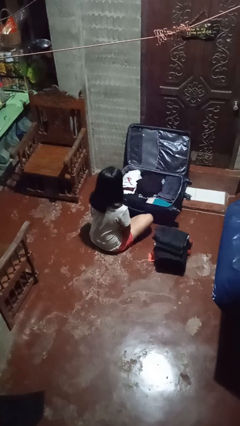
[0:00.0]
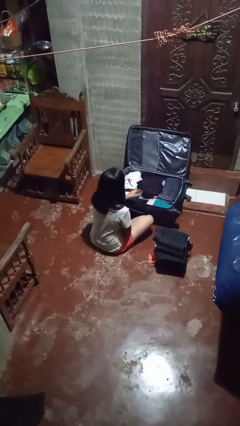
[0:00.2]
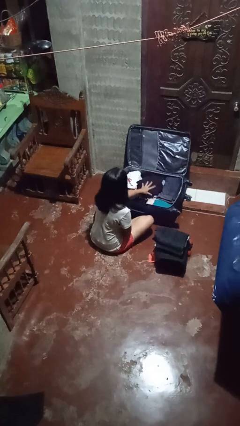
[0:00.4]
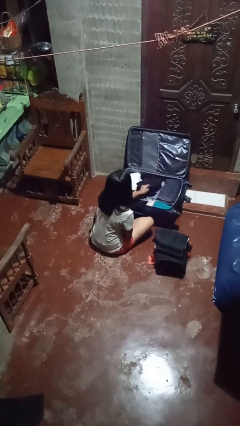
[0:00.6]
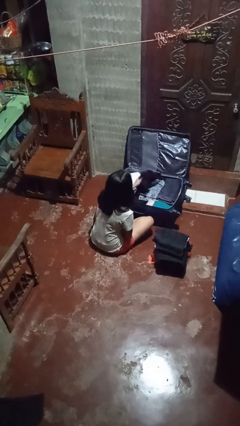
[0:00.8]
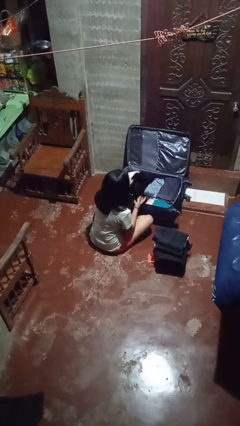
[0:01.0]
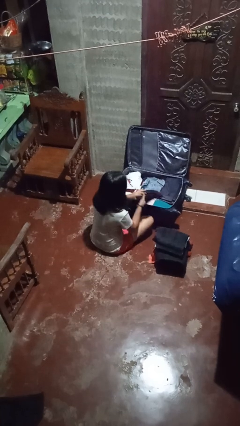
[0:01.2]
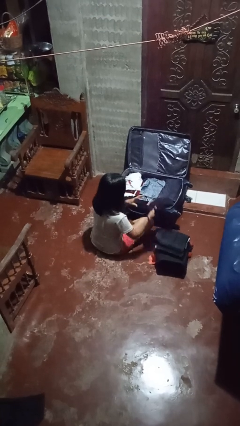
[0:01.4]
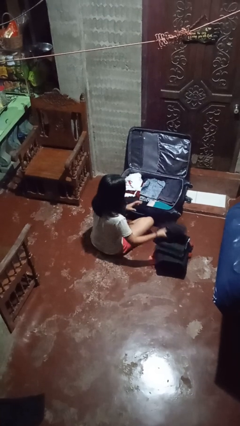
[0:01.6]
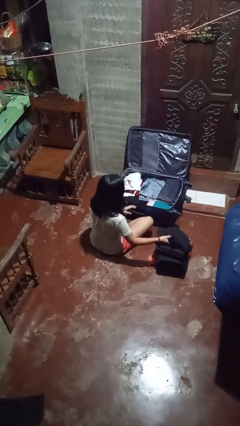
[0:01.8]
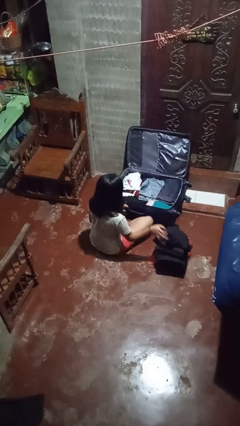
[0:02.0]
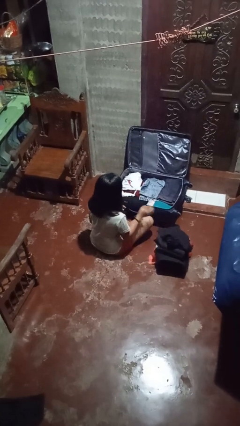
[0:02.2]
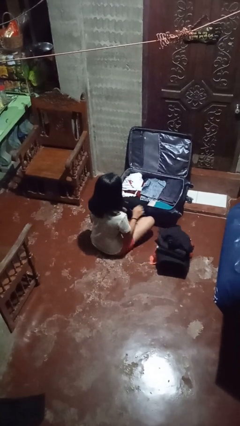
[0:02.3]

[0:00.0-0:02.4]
person unloads clothes from suitcase

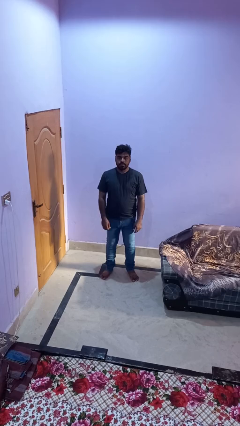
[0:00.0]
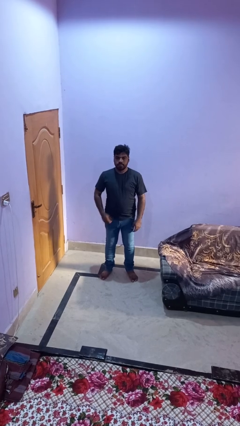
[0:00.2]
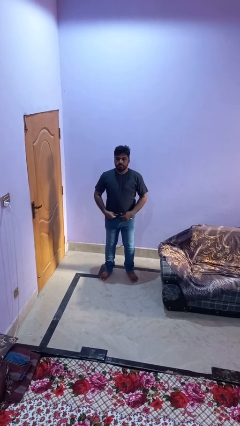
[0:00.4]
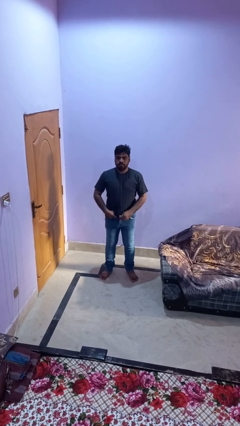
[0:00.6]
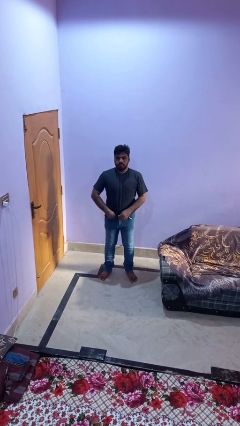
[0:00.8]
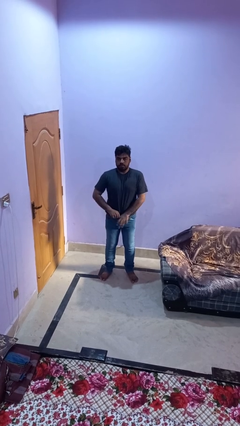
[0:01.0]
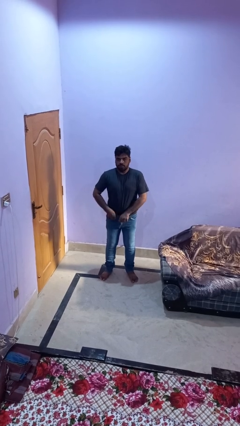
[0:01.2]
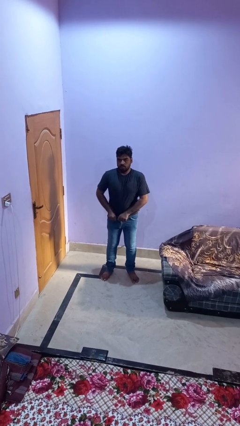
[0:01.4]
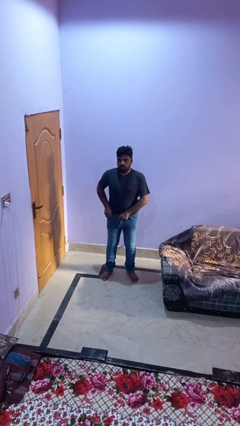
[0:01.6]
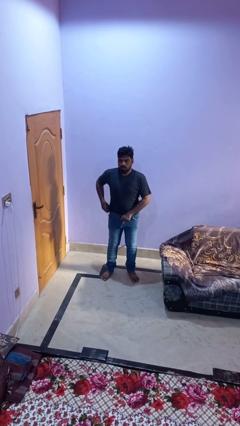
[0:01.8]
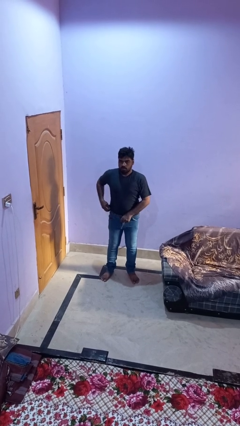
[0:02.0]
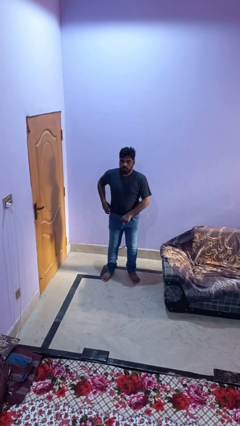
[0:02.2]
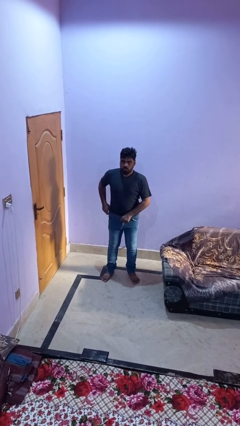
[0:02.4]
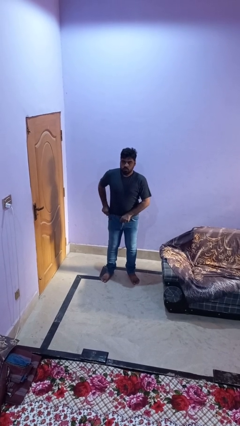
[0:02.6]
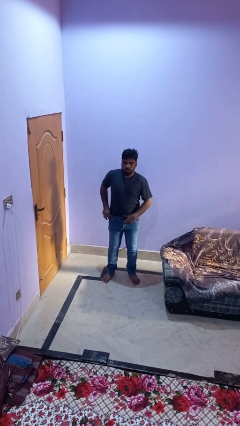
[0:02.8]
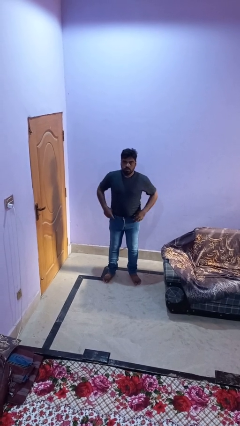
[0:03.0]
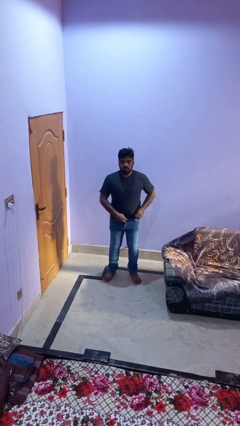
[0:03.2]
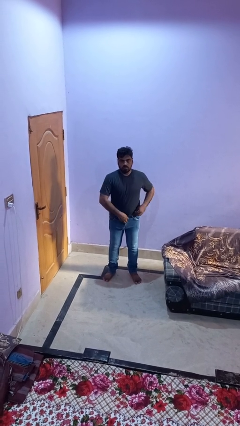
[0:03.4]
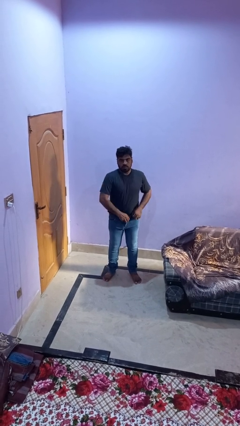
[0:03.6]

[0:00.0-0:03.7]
person tucks in shirt

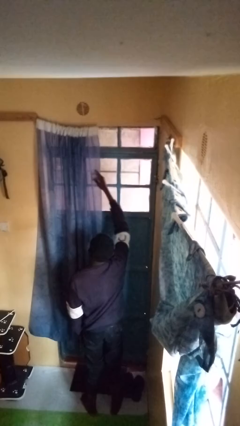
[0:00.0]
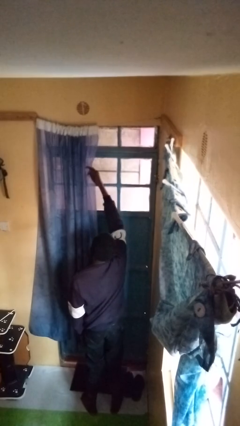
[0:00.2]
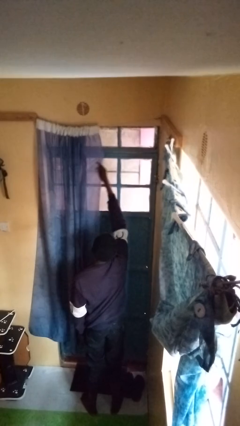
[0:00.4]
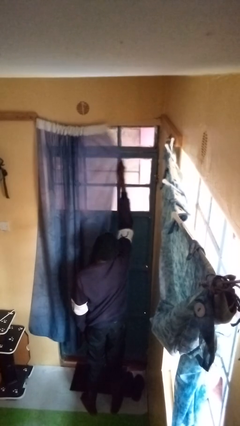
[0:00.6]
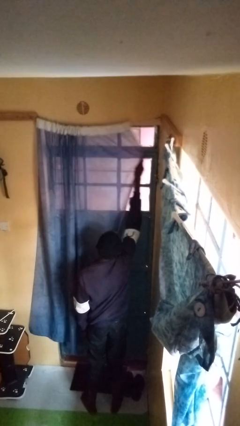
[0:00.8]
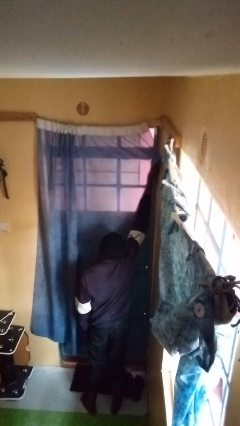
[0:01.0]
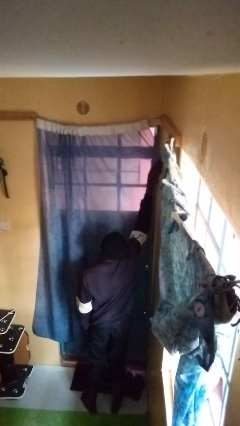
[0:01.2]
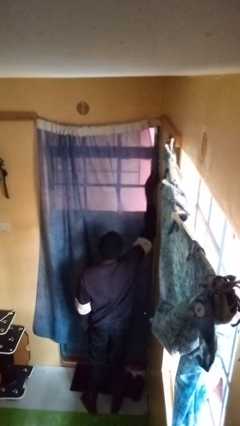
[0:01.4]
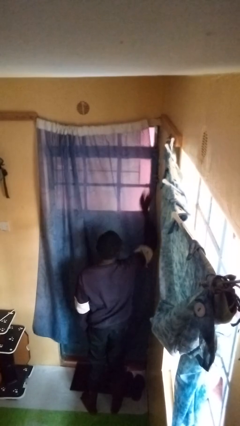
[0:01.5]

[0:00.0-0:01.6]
person closes curtains

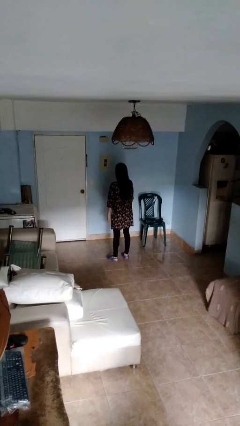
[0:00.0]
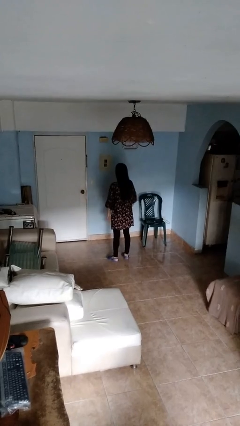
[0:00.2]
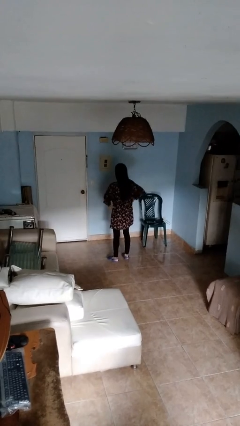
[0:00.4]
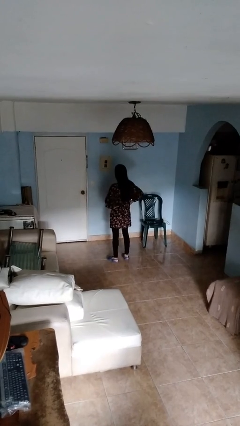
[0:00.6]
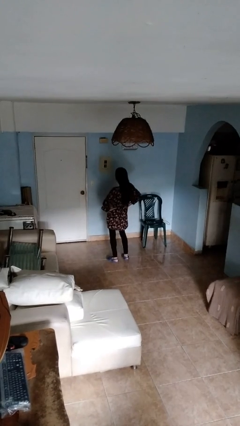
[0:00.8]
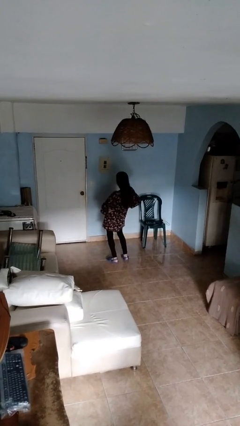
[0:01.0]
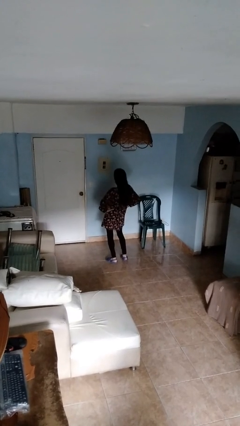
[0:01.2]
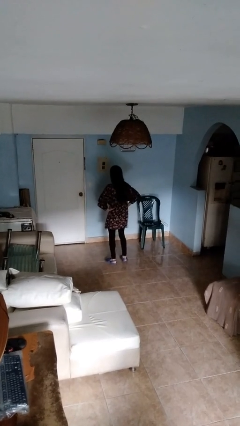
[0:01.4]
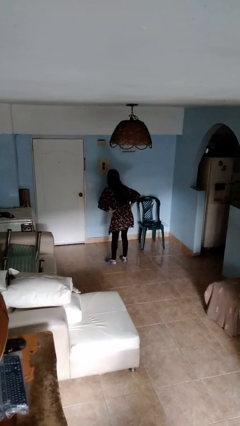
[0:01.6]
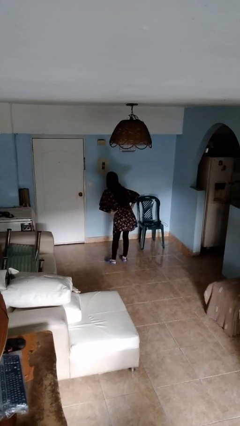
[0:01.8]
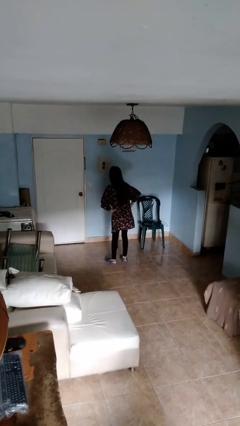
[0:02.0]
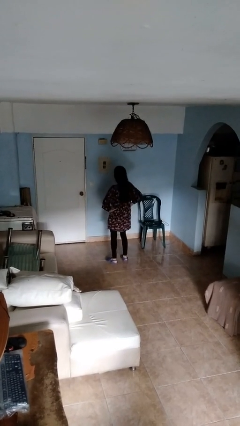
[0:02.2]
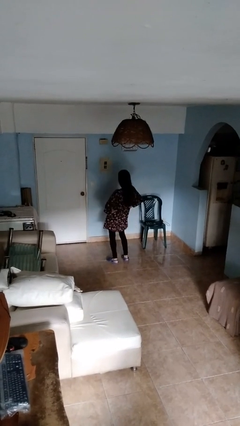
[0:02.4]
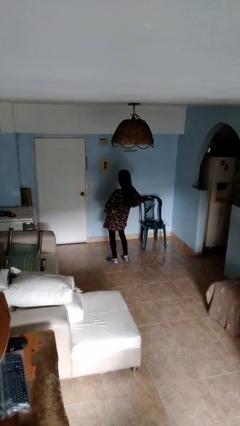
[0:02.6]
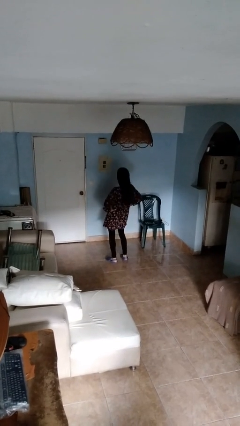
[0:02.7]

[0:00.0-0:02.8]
person wiggles hips

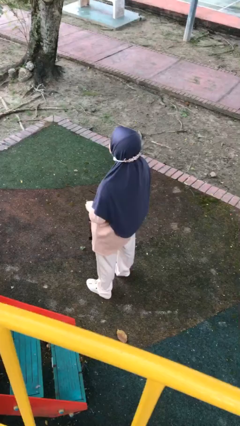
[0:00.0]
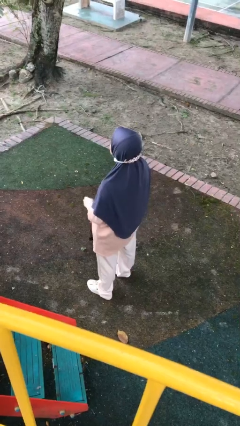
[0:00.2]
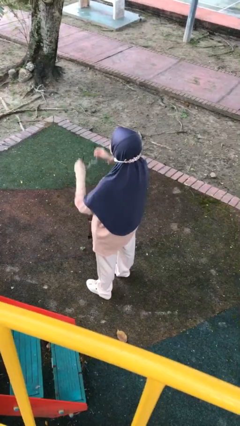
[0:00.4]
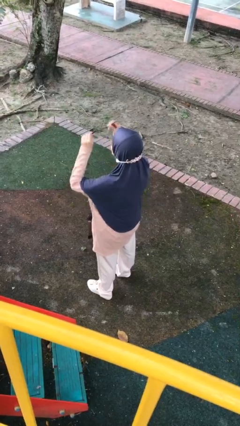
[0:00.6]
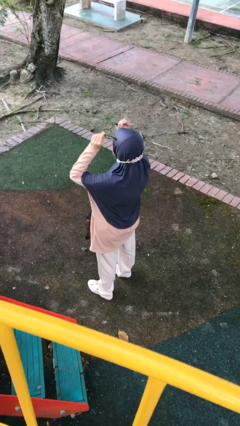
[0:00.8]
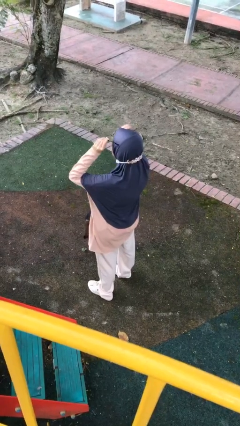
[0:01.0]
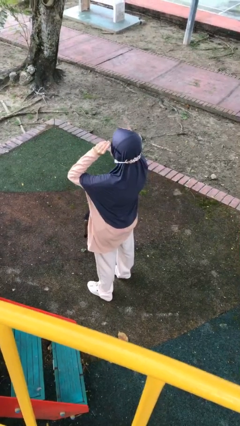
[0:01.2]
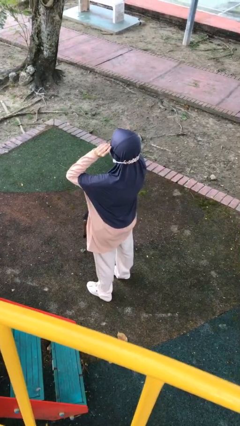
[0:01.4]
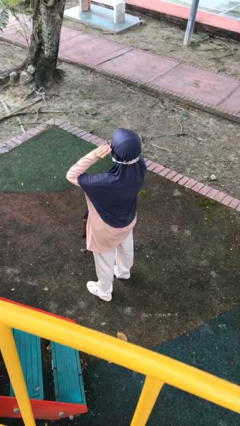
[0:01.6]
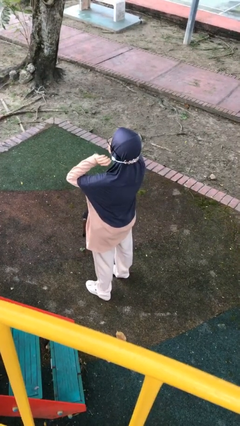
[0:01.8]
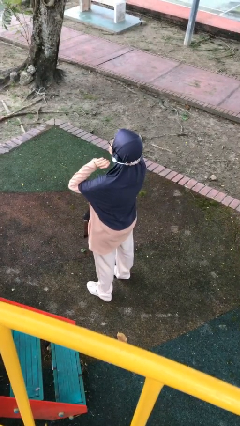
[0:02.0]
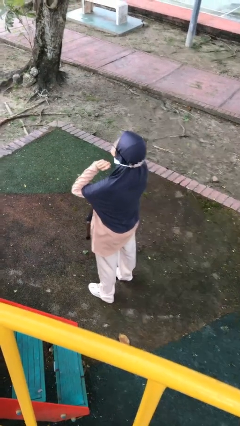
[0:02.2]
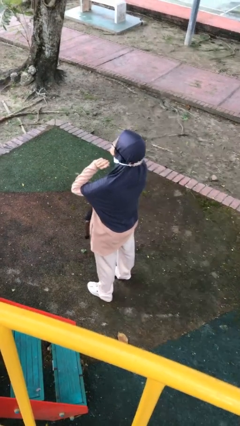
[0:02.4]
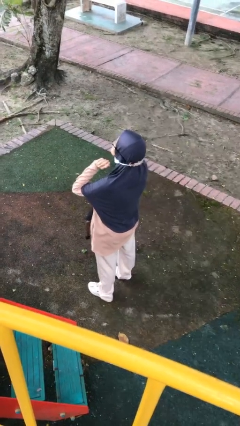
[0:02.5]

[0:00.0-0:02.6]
person puts on glasses

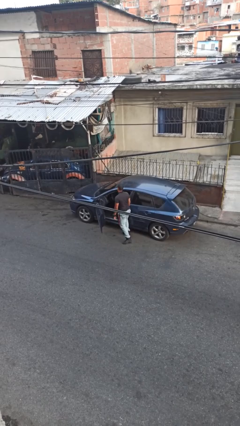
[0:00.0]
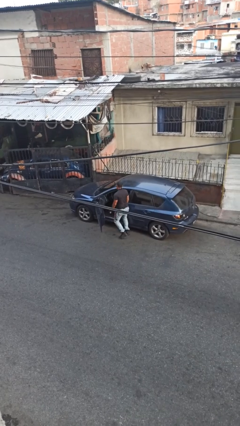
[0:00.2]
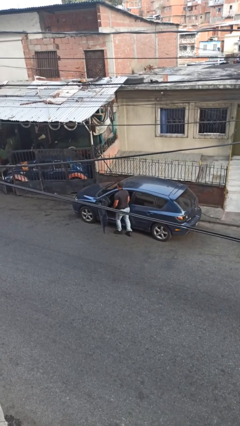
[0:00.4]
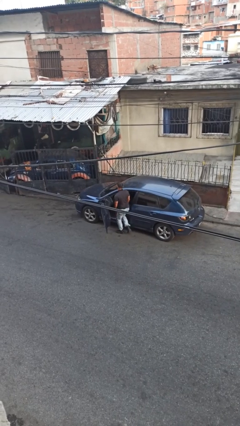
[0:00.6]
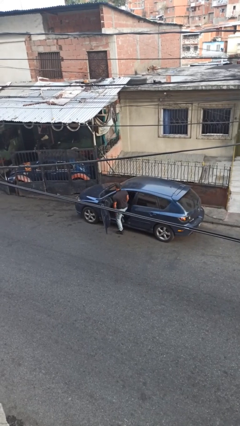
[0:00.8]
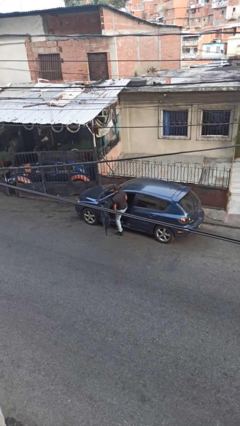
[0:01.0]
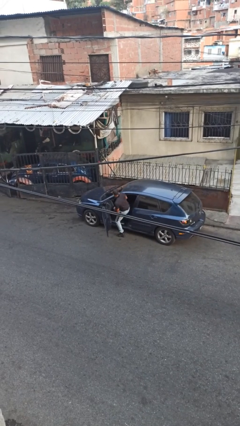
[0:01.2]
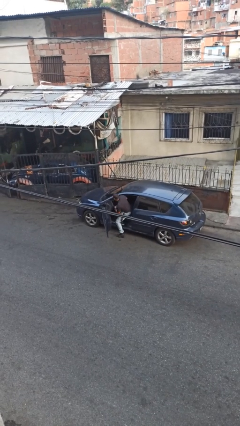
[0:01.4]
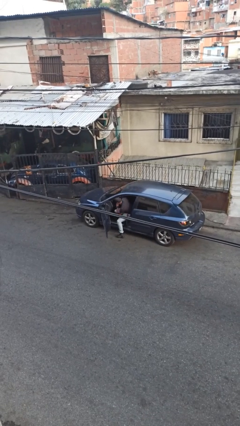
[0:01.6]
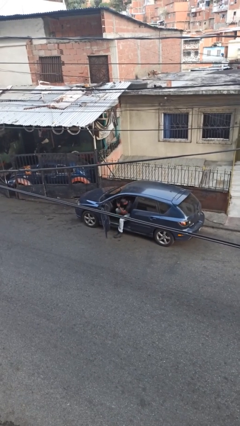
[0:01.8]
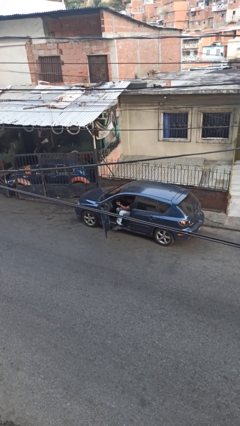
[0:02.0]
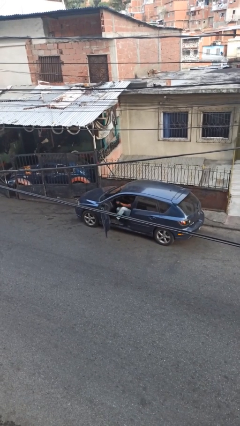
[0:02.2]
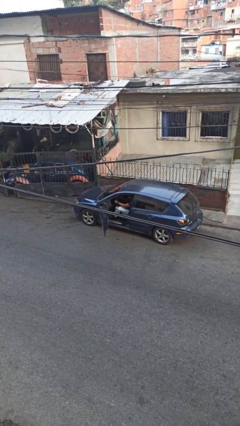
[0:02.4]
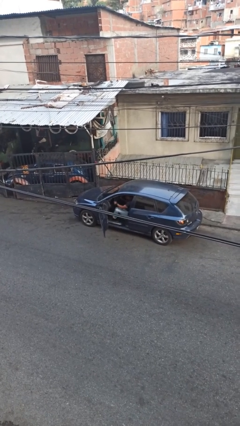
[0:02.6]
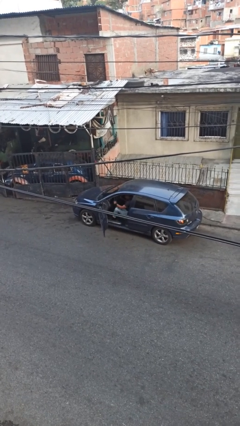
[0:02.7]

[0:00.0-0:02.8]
person enters car

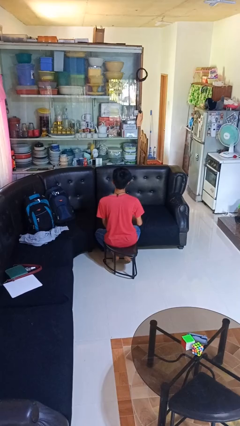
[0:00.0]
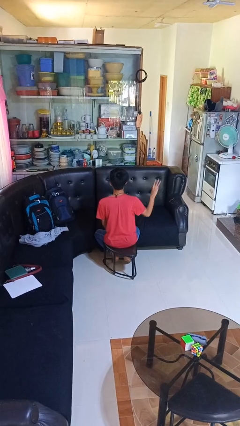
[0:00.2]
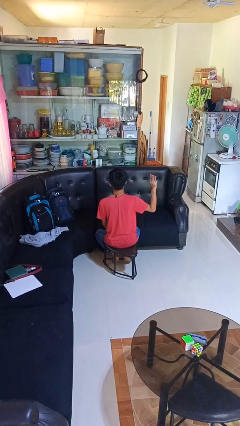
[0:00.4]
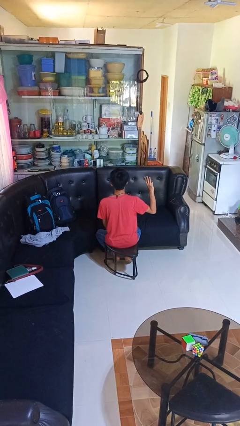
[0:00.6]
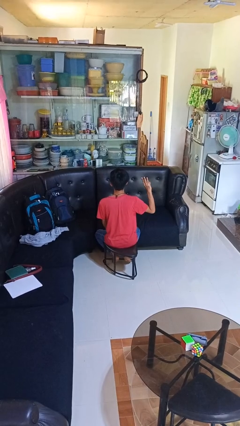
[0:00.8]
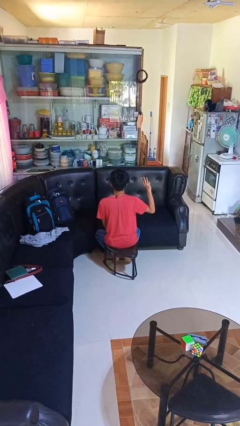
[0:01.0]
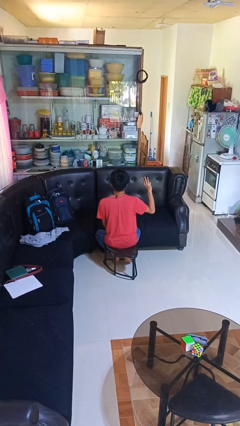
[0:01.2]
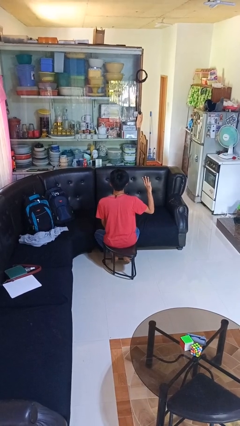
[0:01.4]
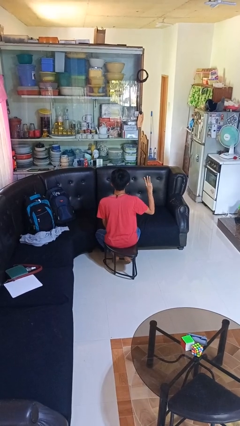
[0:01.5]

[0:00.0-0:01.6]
person gestures number three
